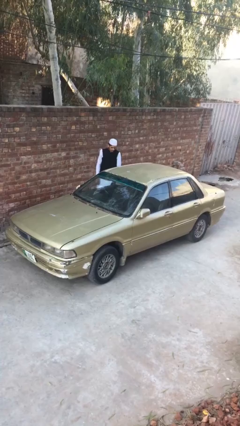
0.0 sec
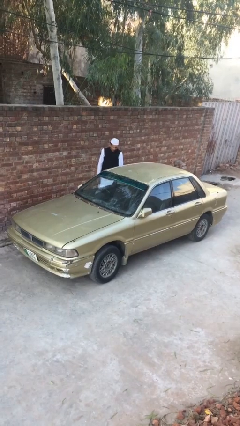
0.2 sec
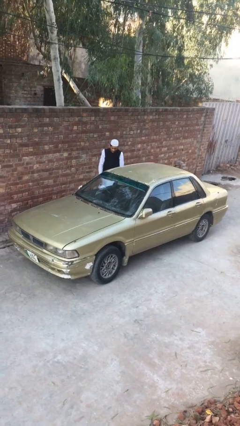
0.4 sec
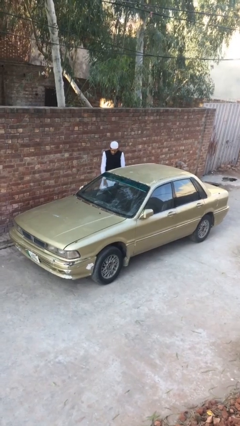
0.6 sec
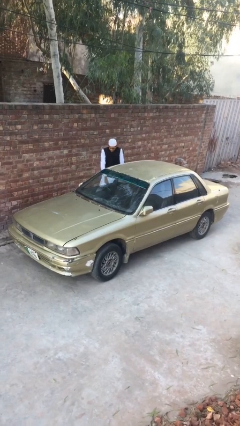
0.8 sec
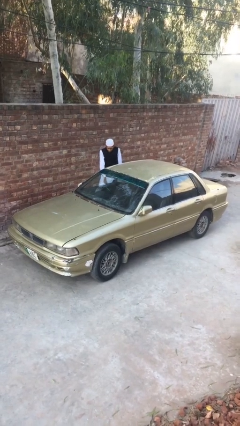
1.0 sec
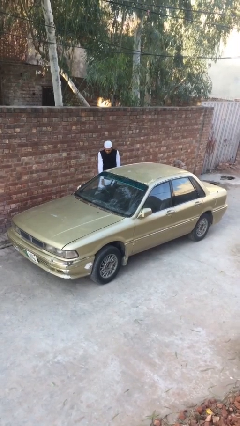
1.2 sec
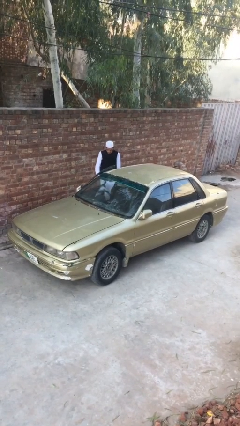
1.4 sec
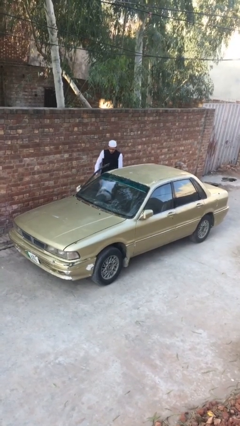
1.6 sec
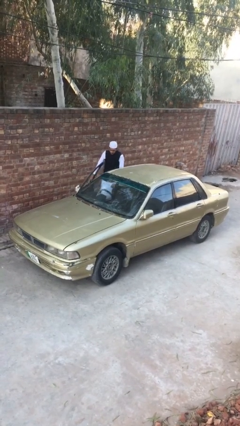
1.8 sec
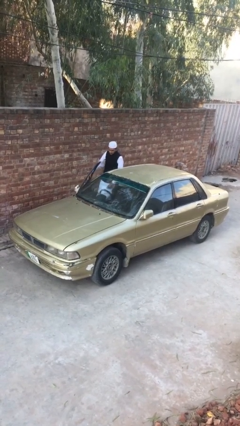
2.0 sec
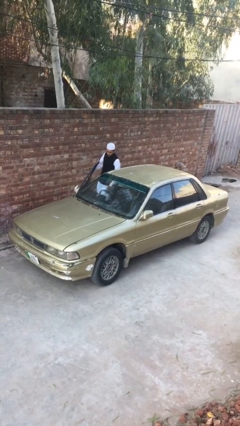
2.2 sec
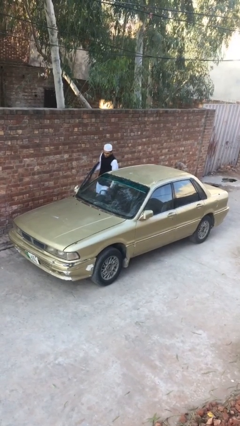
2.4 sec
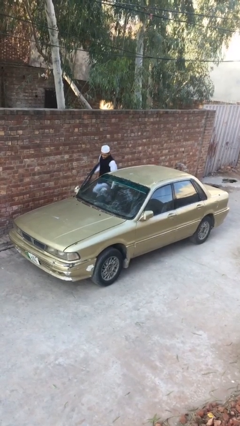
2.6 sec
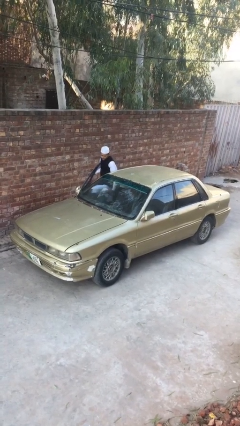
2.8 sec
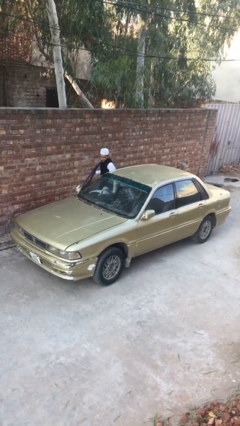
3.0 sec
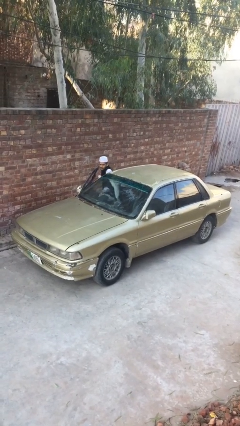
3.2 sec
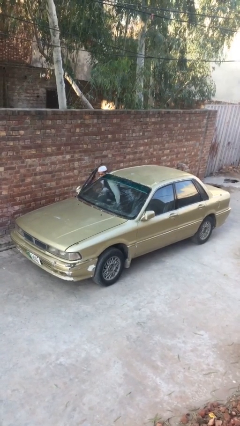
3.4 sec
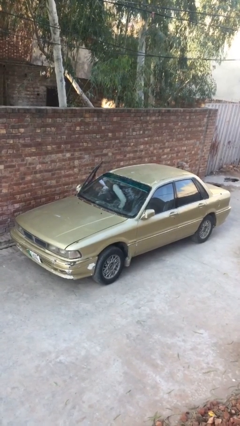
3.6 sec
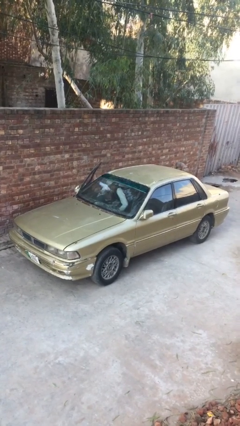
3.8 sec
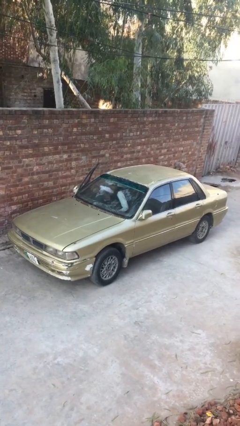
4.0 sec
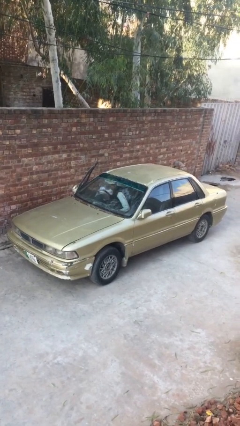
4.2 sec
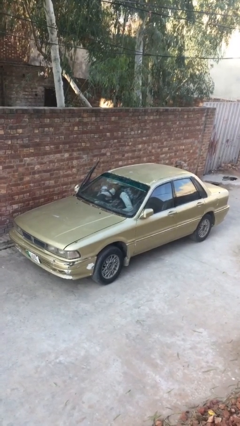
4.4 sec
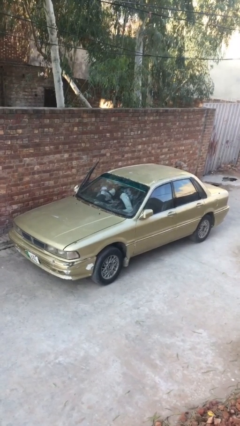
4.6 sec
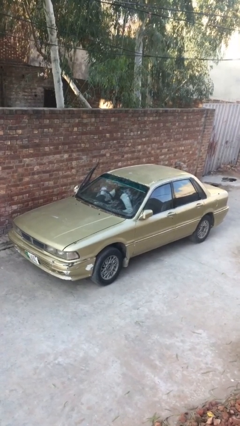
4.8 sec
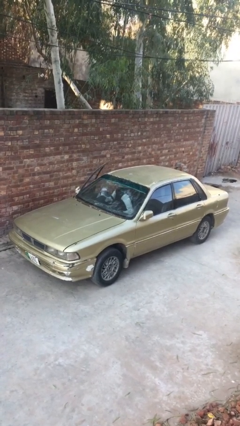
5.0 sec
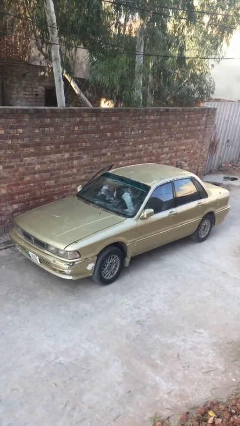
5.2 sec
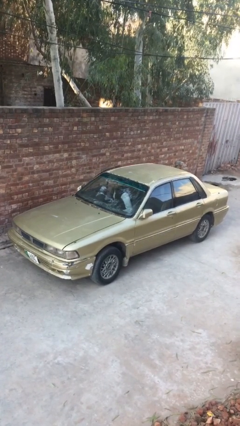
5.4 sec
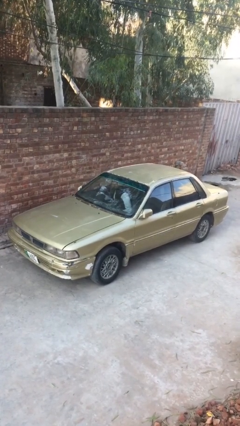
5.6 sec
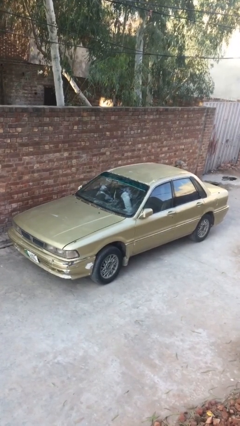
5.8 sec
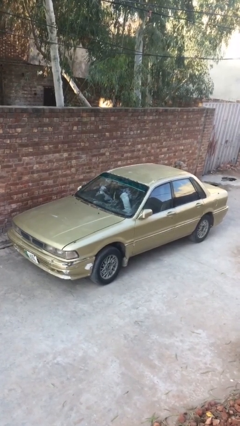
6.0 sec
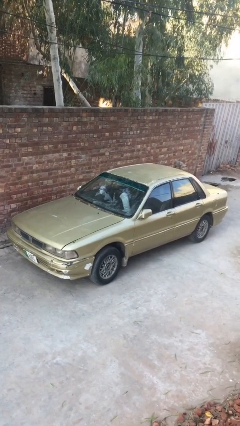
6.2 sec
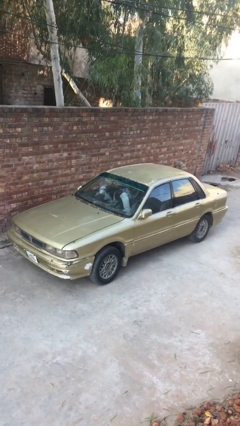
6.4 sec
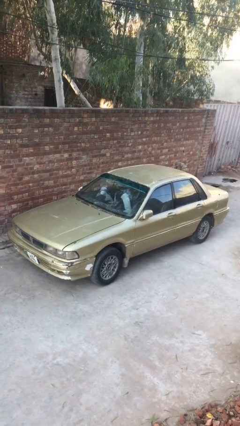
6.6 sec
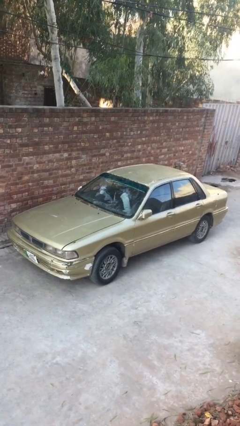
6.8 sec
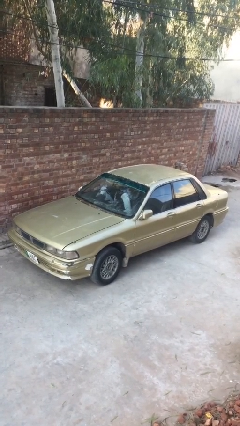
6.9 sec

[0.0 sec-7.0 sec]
car picks up person

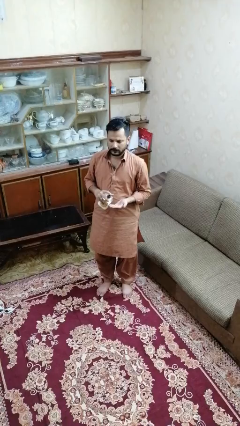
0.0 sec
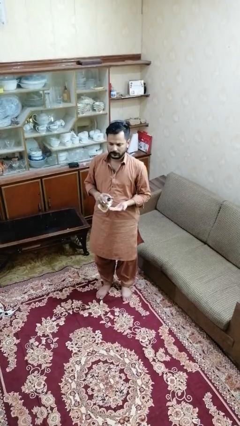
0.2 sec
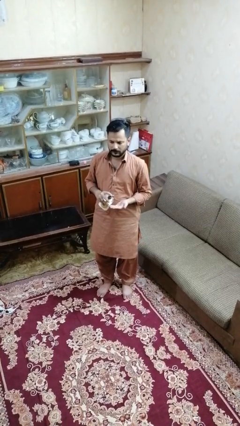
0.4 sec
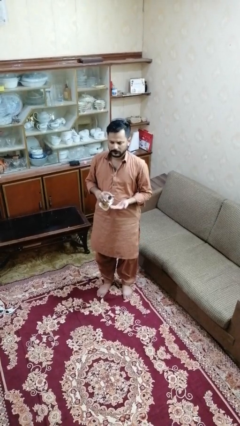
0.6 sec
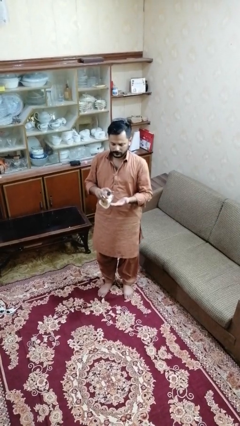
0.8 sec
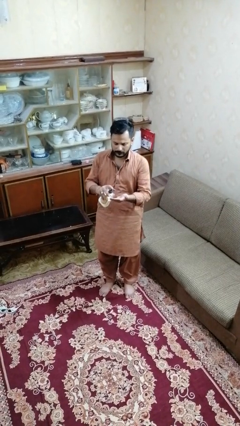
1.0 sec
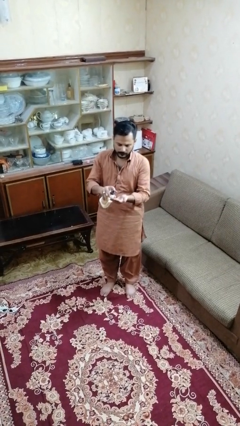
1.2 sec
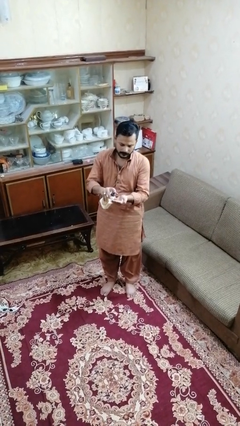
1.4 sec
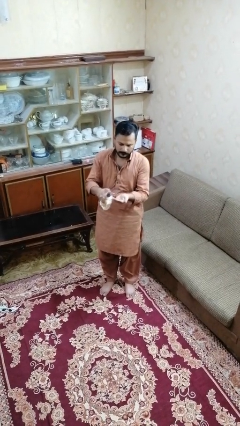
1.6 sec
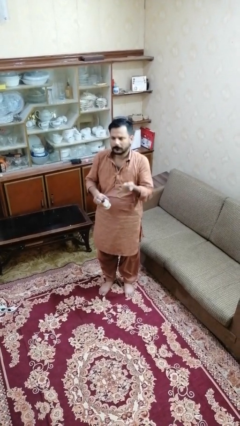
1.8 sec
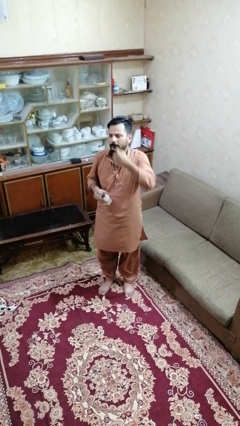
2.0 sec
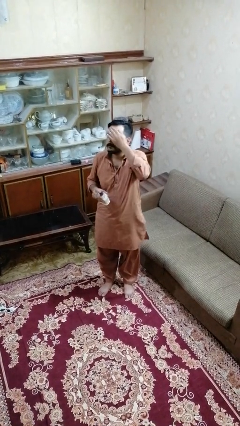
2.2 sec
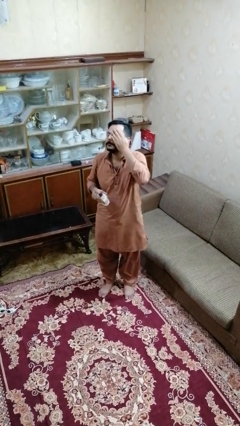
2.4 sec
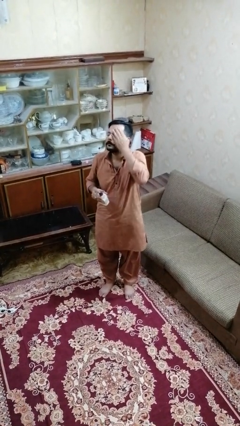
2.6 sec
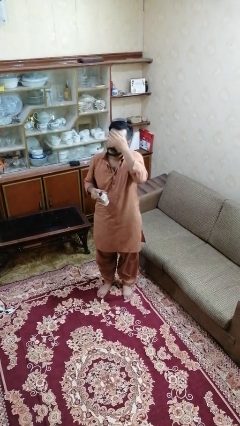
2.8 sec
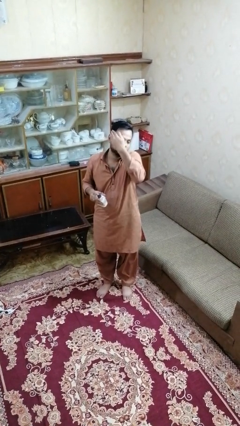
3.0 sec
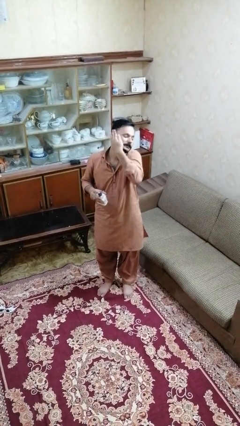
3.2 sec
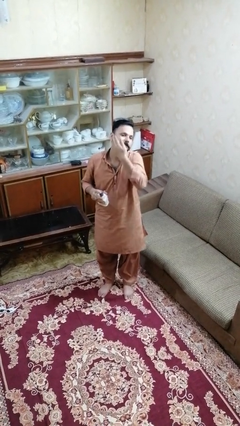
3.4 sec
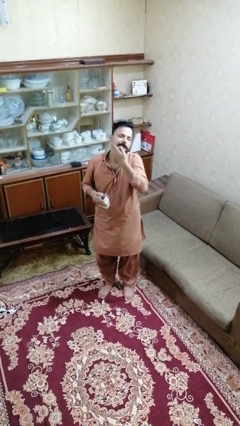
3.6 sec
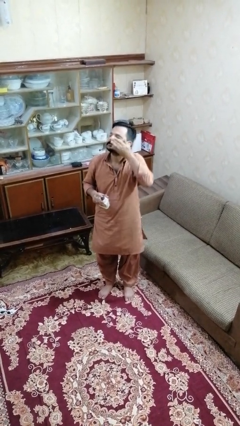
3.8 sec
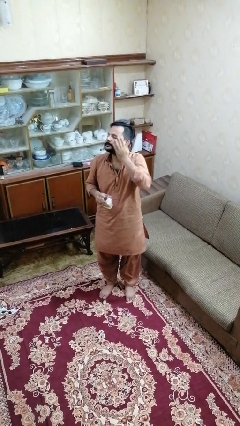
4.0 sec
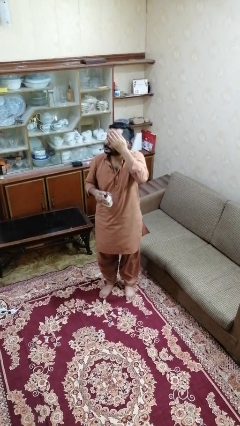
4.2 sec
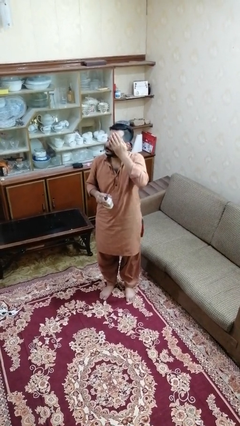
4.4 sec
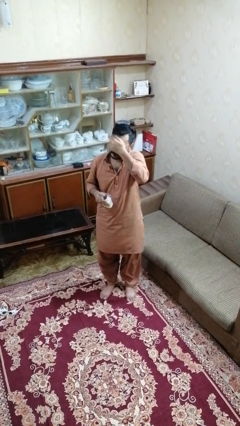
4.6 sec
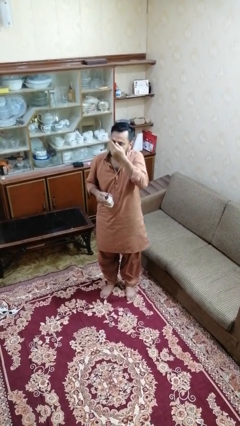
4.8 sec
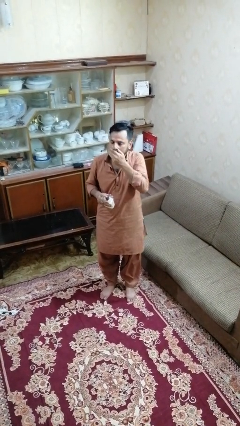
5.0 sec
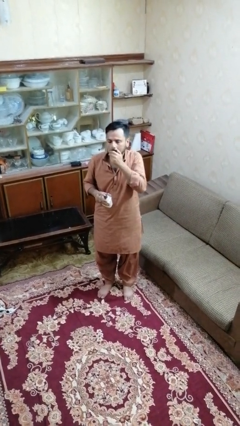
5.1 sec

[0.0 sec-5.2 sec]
person applies facial moisturizer

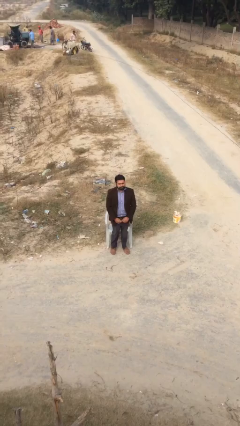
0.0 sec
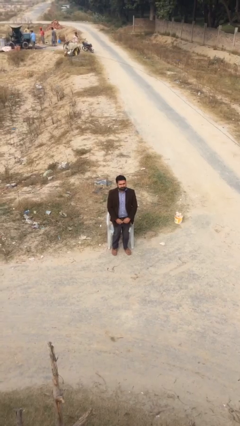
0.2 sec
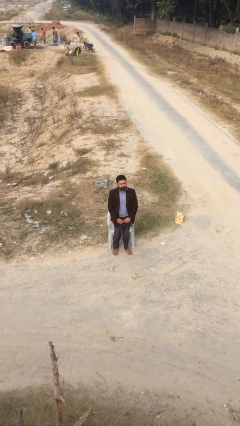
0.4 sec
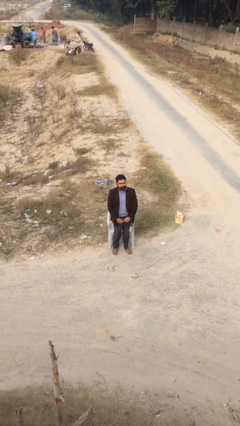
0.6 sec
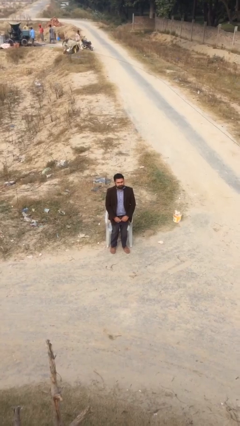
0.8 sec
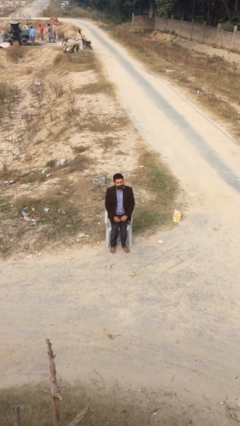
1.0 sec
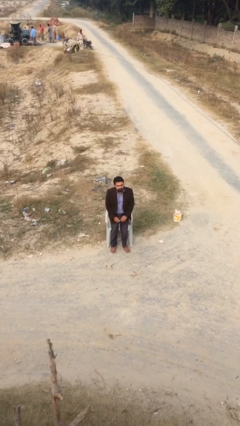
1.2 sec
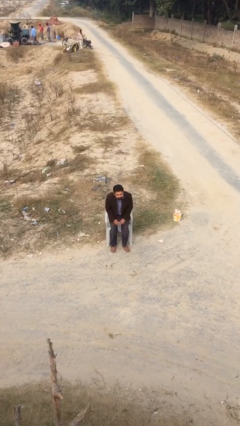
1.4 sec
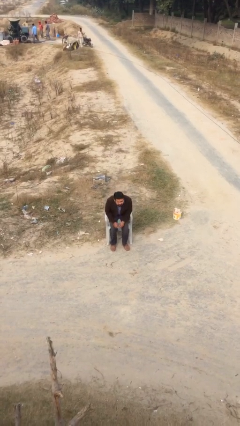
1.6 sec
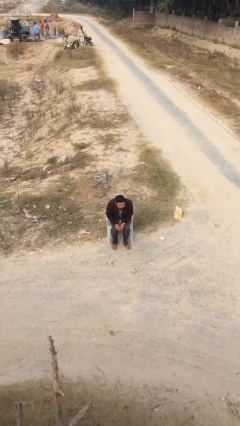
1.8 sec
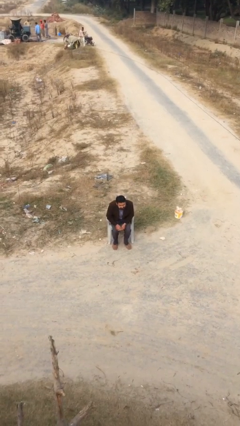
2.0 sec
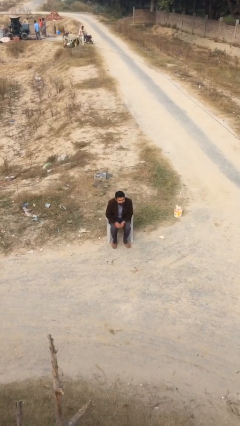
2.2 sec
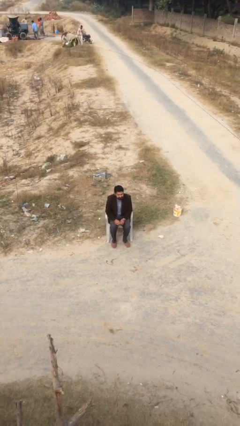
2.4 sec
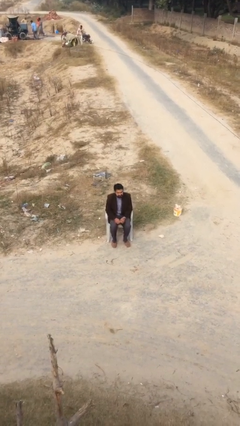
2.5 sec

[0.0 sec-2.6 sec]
person sits down

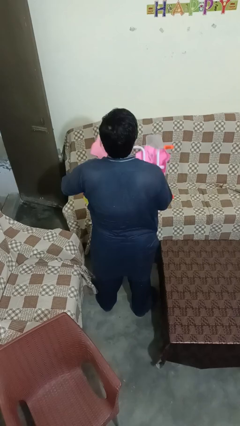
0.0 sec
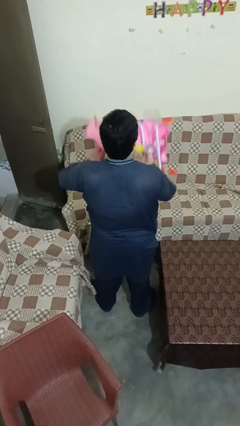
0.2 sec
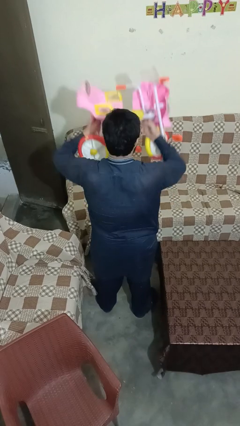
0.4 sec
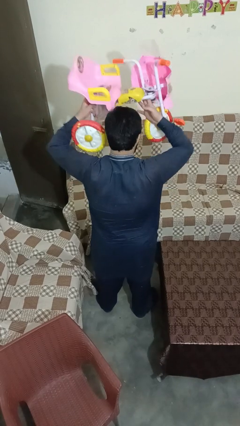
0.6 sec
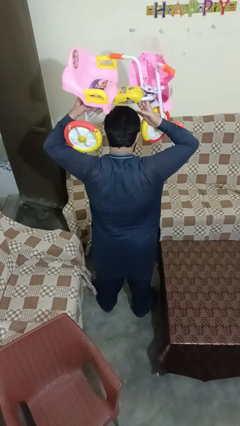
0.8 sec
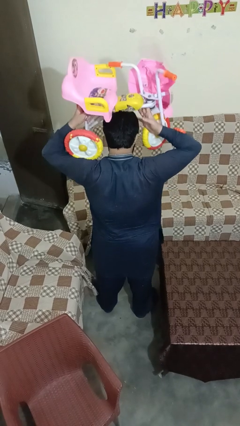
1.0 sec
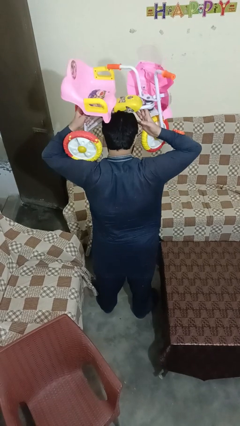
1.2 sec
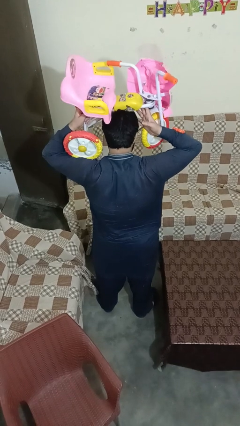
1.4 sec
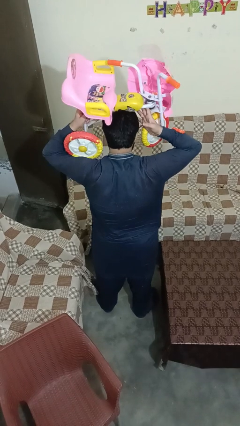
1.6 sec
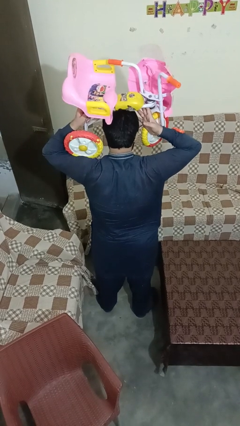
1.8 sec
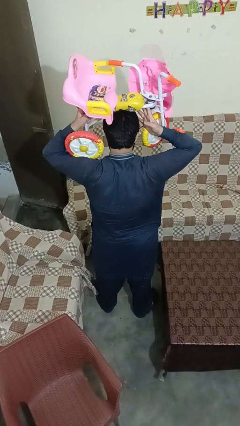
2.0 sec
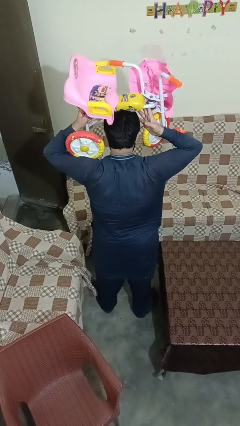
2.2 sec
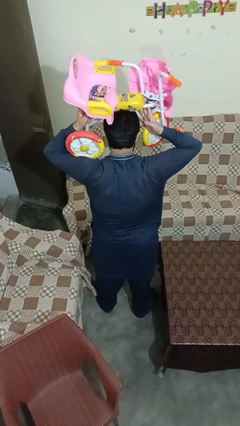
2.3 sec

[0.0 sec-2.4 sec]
person holds object above head

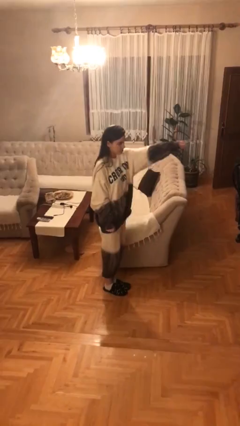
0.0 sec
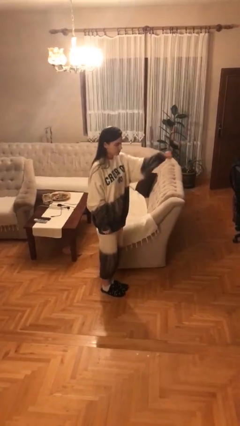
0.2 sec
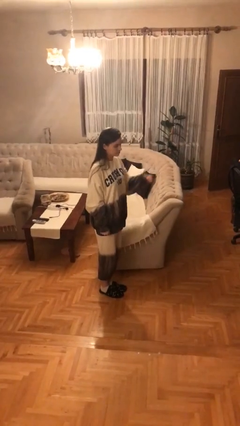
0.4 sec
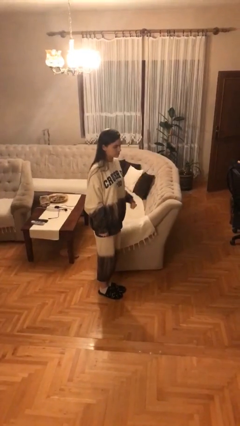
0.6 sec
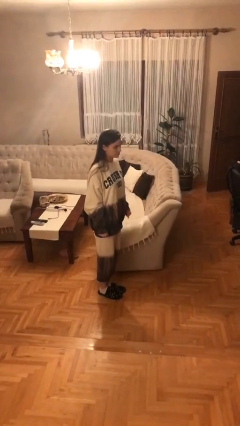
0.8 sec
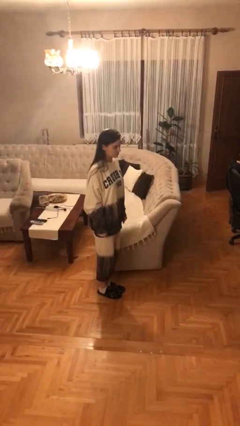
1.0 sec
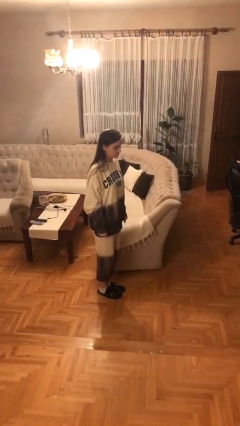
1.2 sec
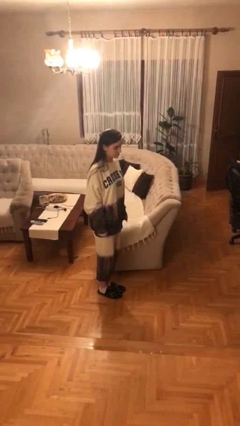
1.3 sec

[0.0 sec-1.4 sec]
person punches
